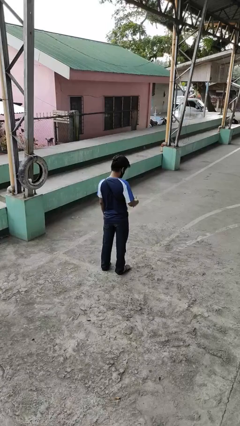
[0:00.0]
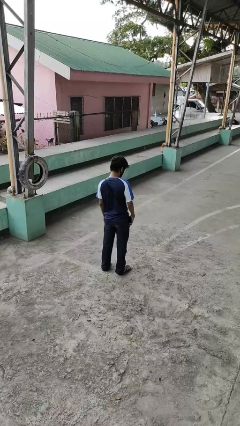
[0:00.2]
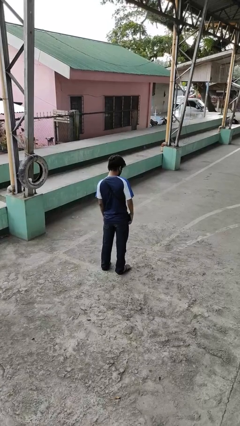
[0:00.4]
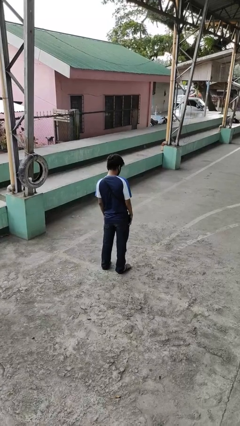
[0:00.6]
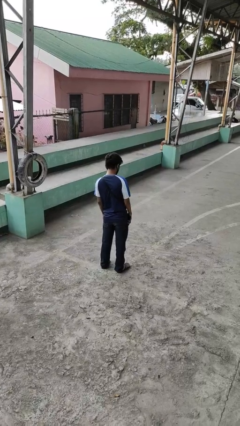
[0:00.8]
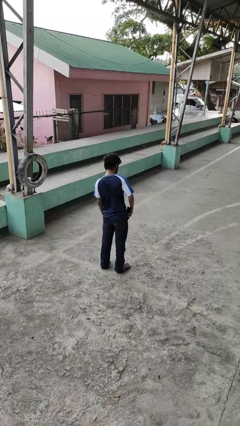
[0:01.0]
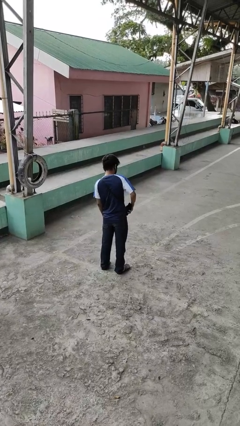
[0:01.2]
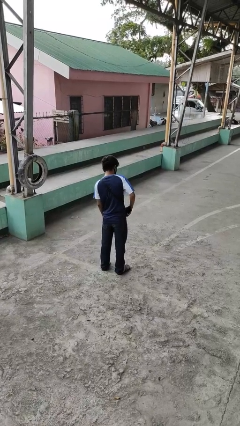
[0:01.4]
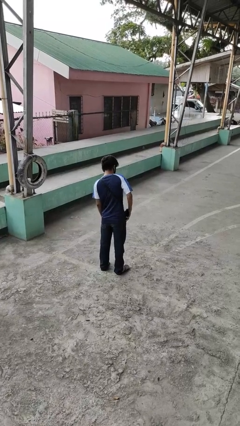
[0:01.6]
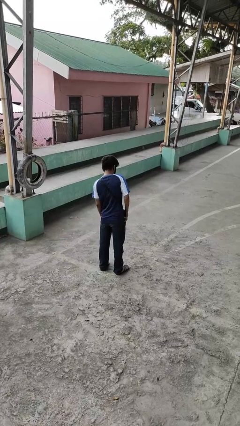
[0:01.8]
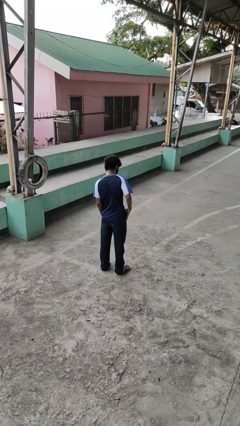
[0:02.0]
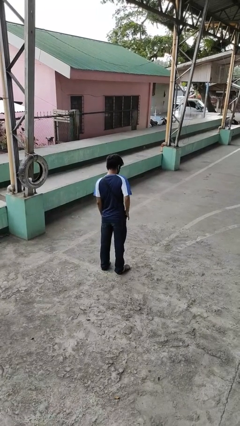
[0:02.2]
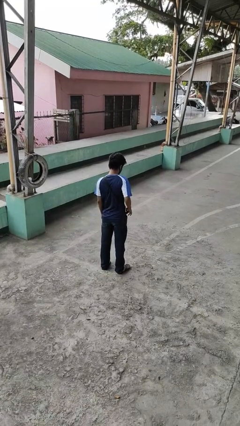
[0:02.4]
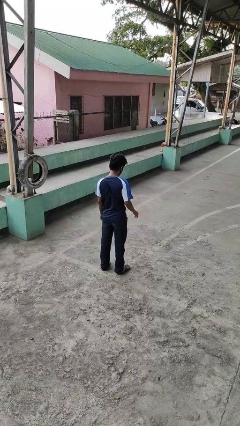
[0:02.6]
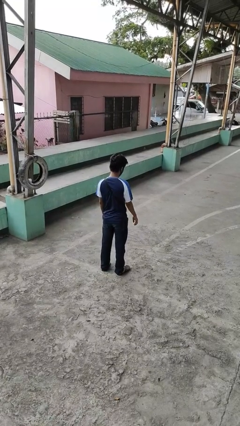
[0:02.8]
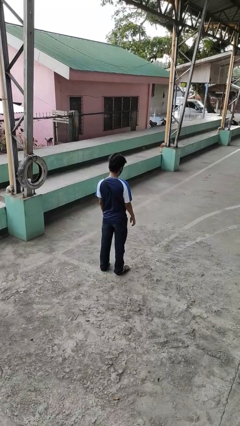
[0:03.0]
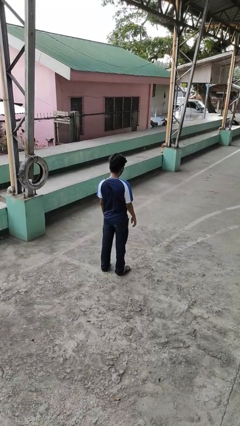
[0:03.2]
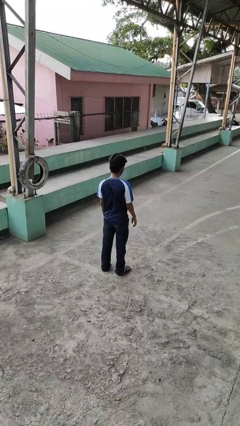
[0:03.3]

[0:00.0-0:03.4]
person puts phone into pocket

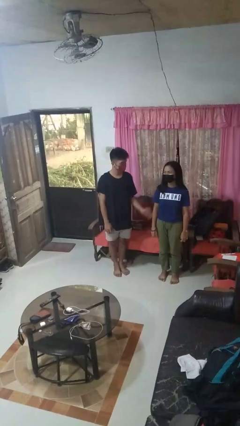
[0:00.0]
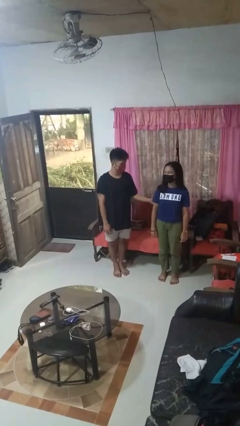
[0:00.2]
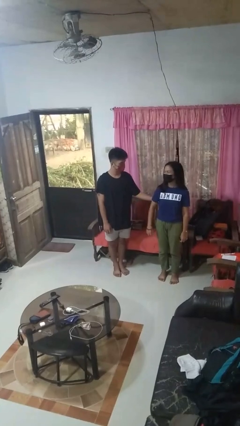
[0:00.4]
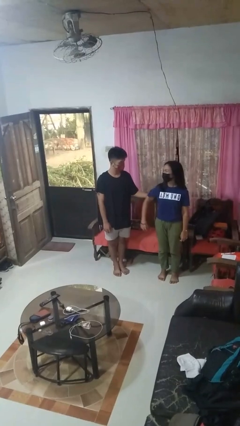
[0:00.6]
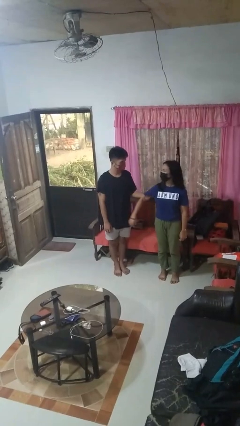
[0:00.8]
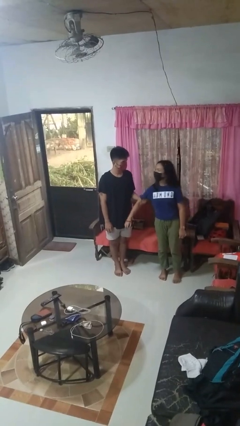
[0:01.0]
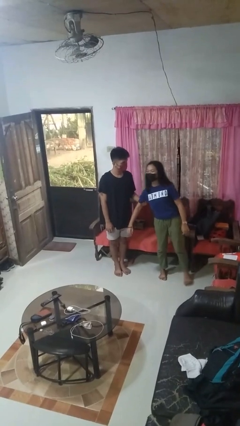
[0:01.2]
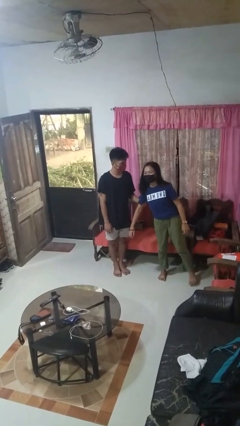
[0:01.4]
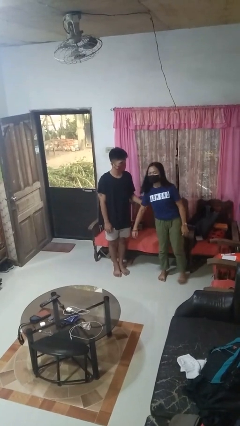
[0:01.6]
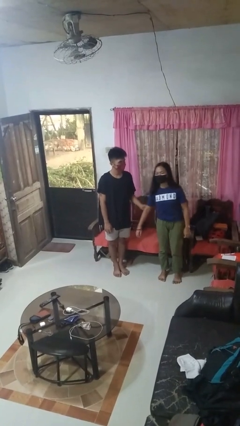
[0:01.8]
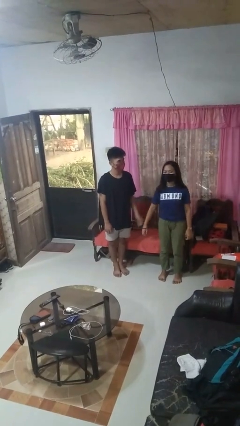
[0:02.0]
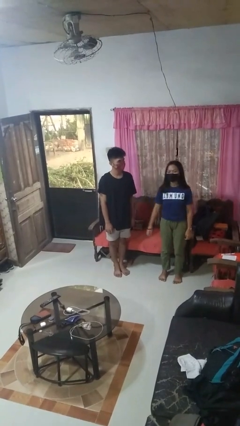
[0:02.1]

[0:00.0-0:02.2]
person grabs person by bicep

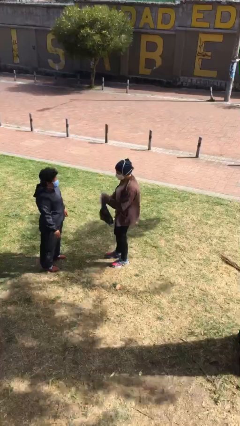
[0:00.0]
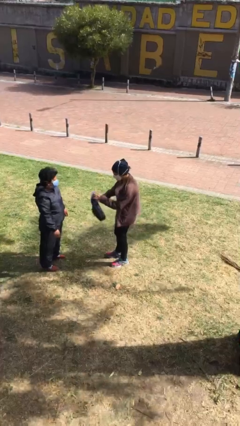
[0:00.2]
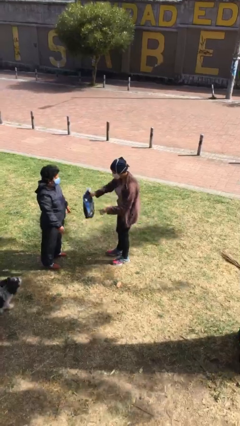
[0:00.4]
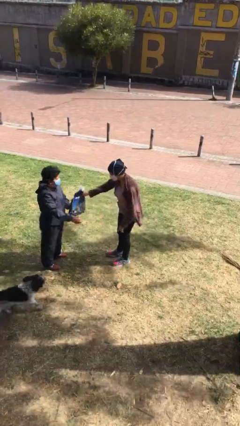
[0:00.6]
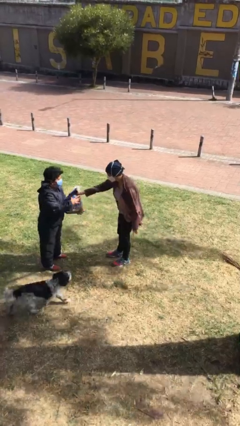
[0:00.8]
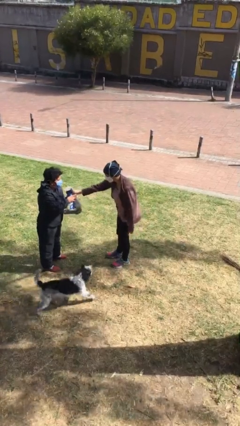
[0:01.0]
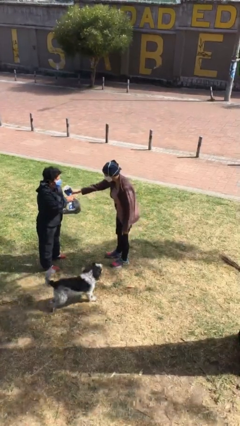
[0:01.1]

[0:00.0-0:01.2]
person transfers object to person

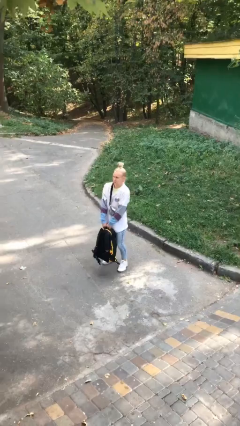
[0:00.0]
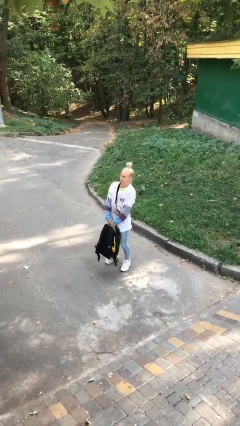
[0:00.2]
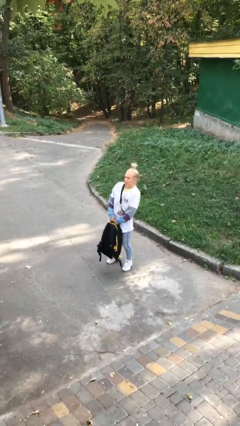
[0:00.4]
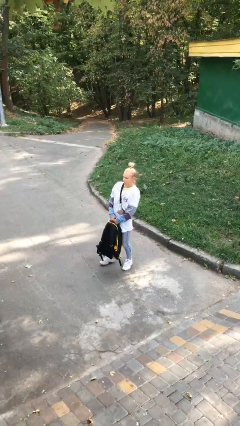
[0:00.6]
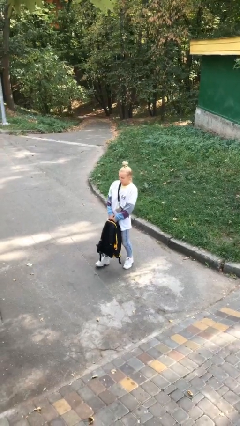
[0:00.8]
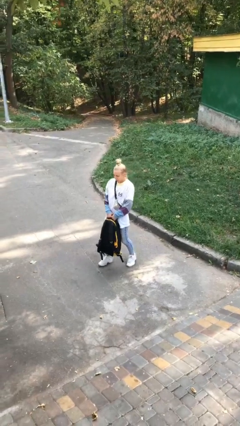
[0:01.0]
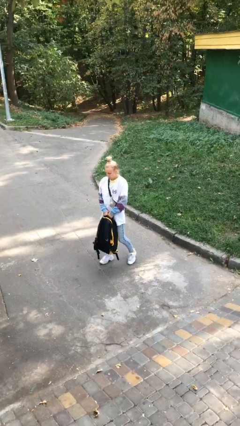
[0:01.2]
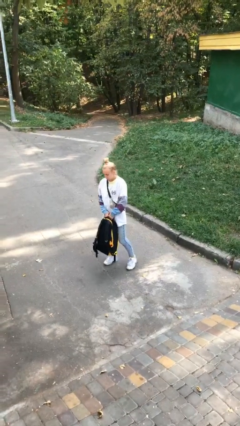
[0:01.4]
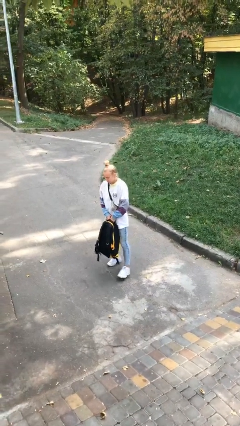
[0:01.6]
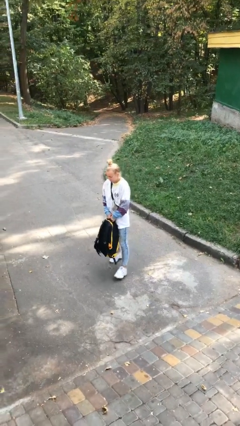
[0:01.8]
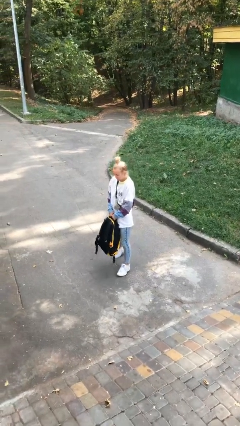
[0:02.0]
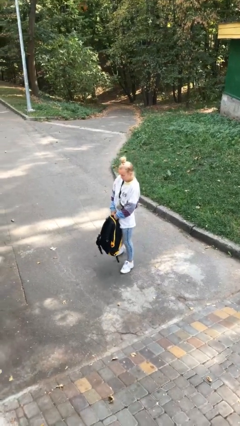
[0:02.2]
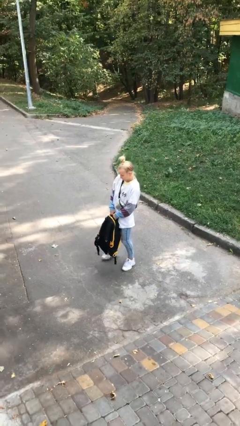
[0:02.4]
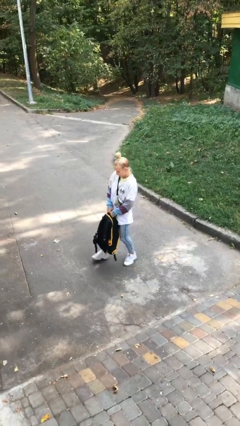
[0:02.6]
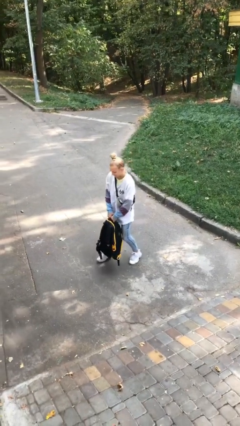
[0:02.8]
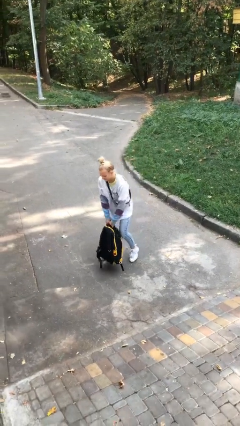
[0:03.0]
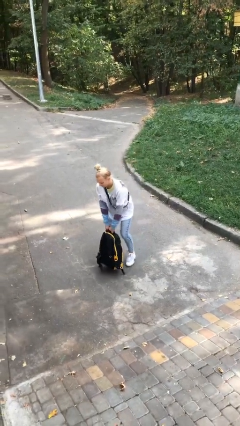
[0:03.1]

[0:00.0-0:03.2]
person carries heavy object

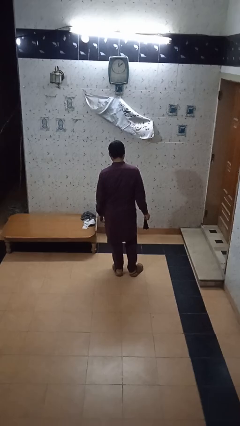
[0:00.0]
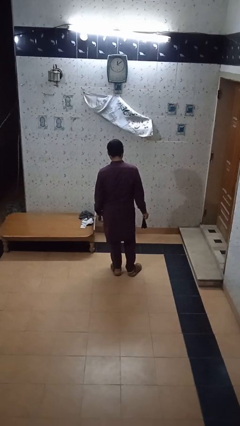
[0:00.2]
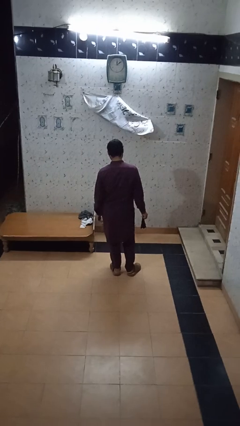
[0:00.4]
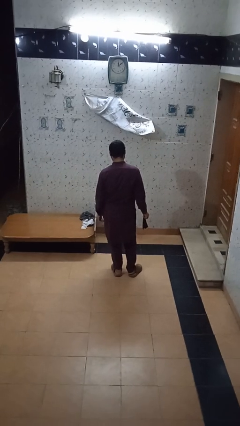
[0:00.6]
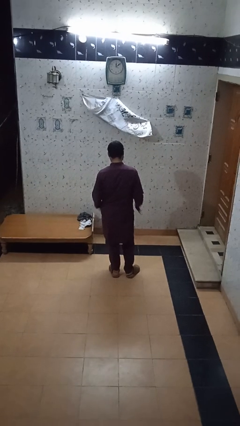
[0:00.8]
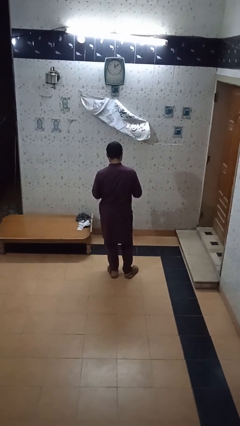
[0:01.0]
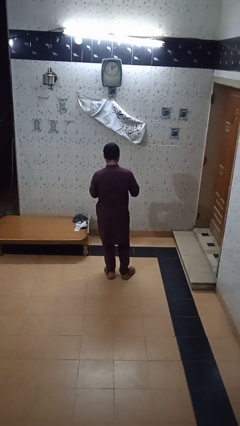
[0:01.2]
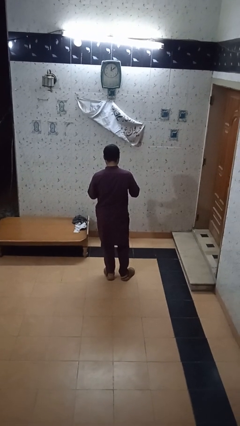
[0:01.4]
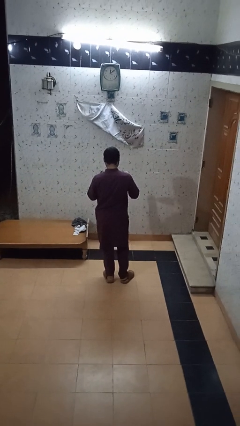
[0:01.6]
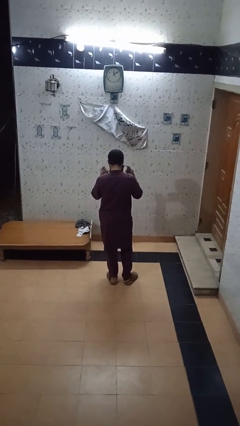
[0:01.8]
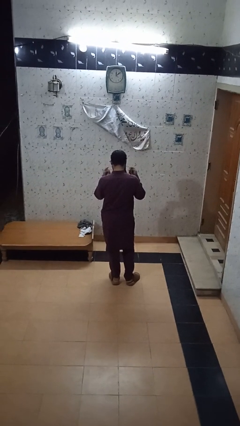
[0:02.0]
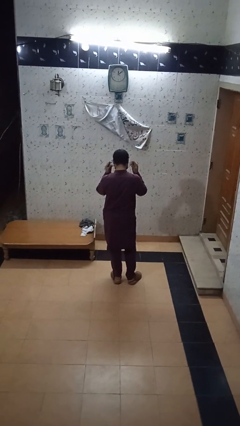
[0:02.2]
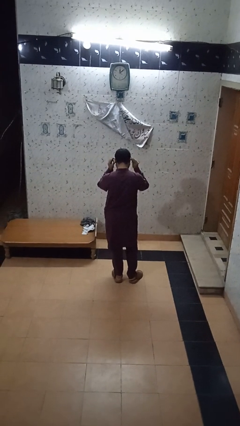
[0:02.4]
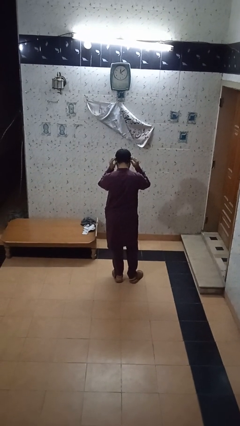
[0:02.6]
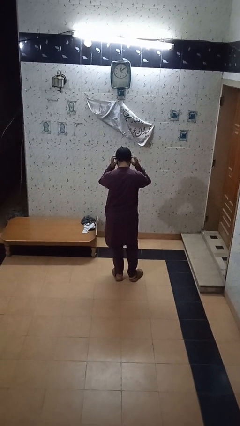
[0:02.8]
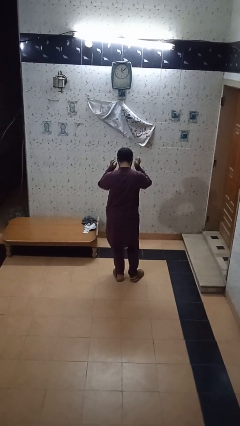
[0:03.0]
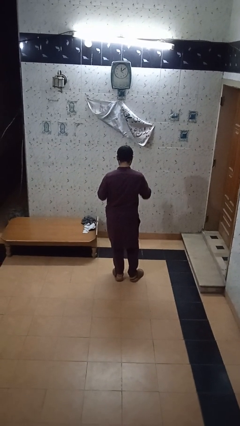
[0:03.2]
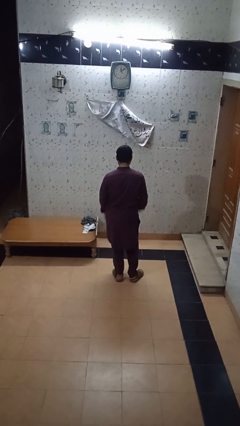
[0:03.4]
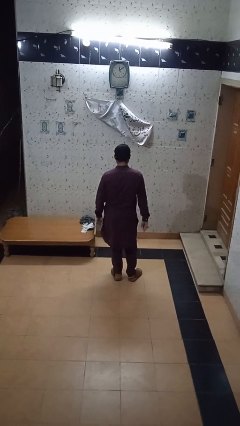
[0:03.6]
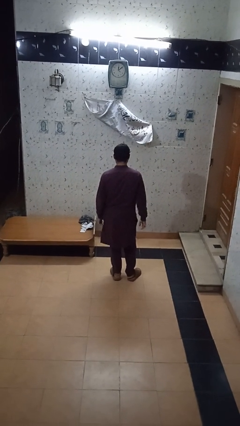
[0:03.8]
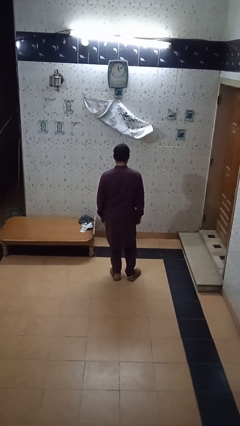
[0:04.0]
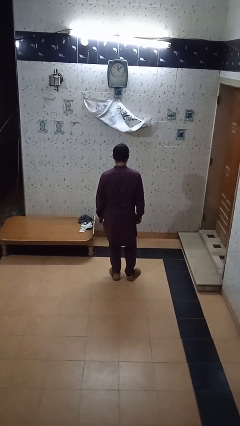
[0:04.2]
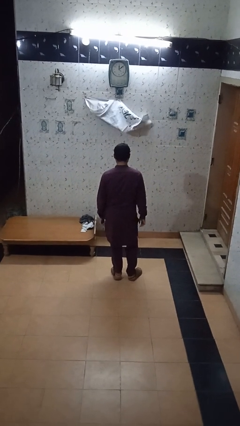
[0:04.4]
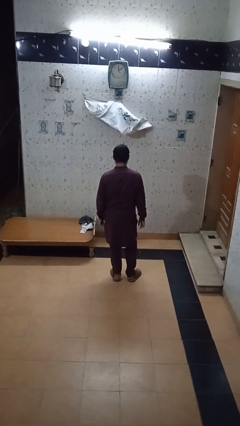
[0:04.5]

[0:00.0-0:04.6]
person puts on facemask

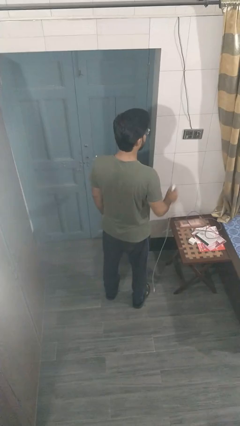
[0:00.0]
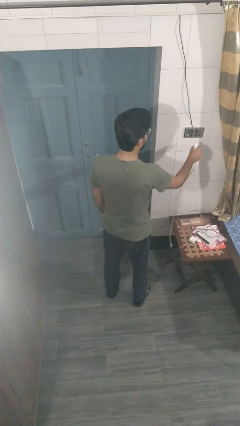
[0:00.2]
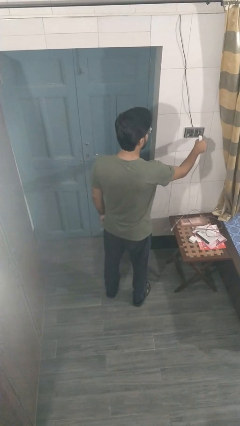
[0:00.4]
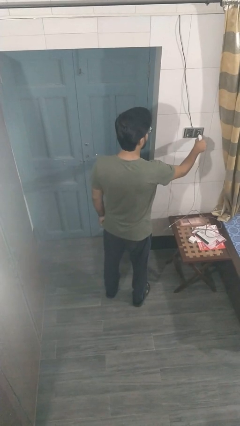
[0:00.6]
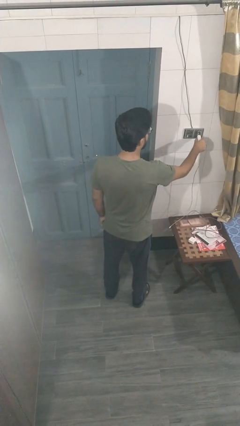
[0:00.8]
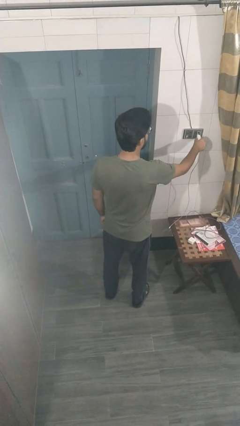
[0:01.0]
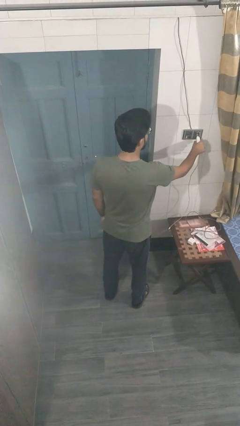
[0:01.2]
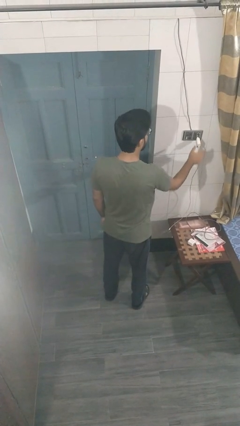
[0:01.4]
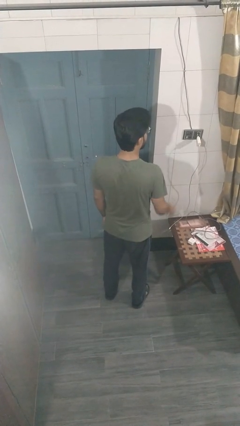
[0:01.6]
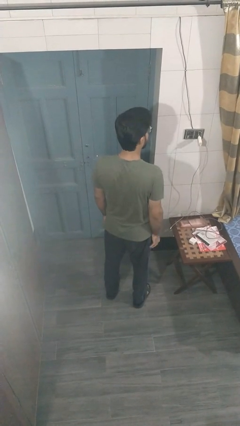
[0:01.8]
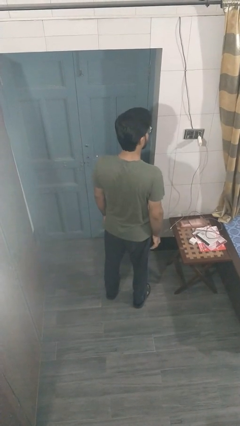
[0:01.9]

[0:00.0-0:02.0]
person plugs into electrical socket

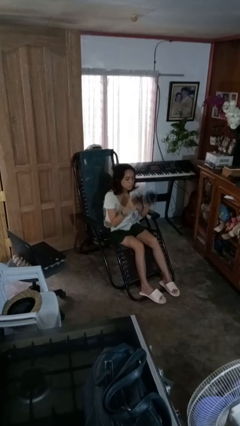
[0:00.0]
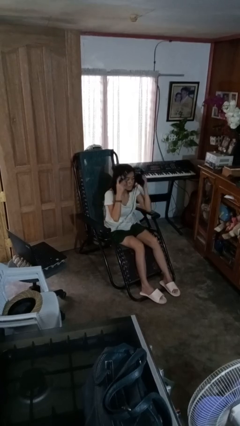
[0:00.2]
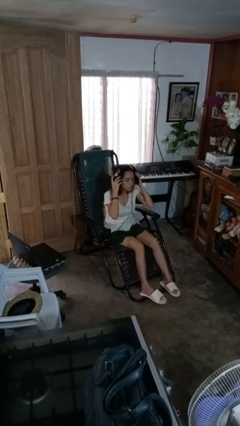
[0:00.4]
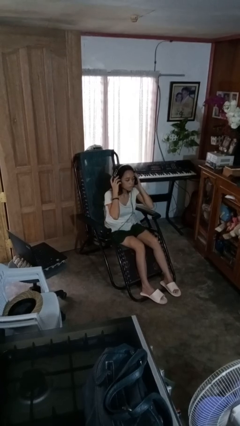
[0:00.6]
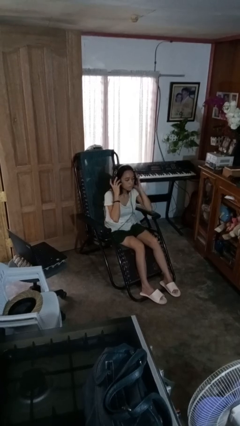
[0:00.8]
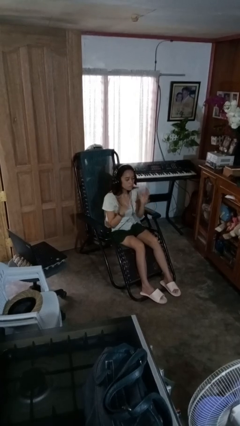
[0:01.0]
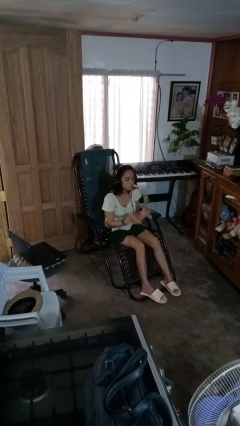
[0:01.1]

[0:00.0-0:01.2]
person puts on headphones
